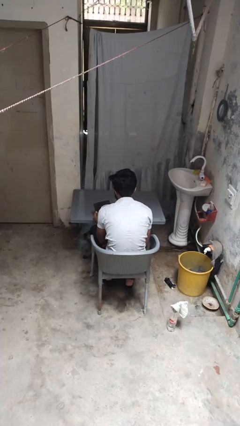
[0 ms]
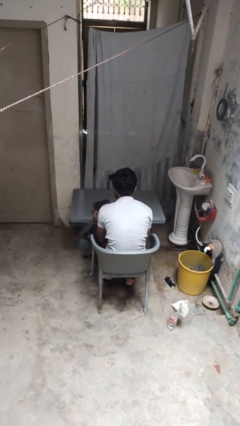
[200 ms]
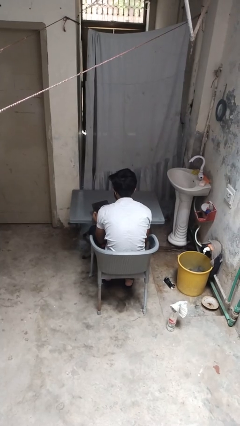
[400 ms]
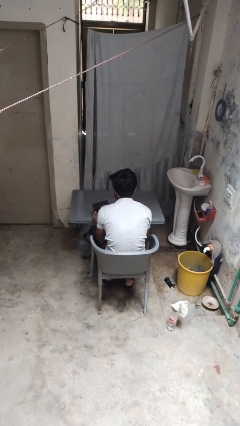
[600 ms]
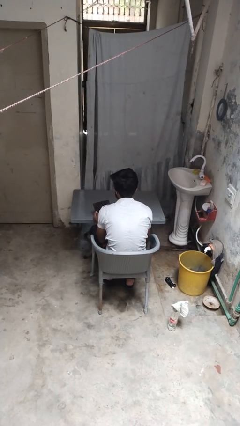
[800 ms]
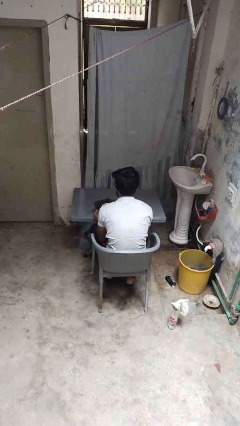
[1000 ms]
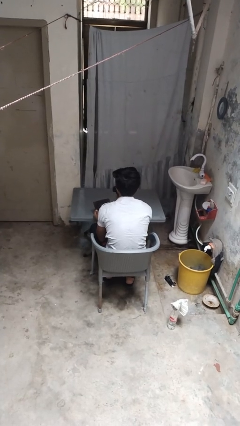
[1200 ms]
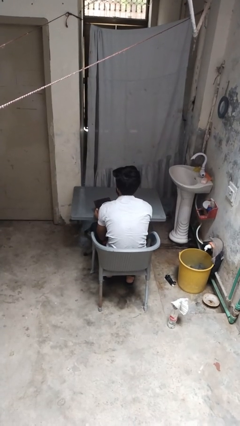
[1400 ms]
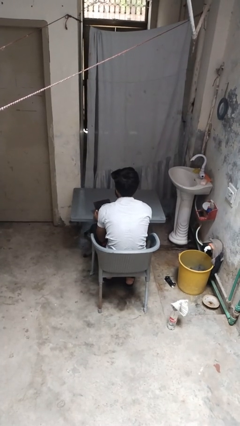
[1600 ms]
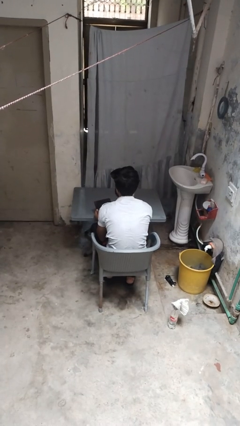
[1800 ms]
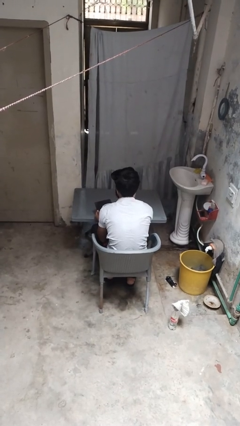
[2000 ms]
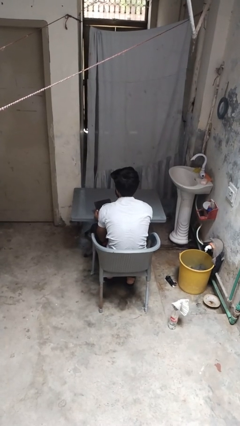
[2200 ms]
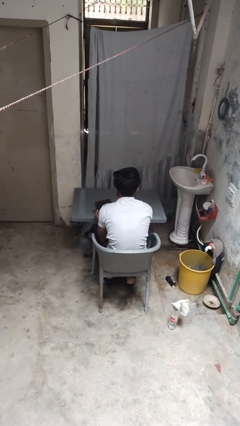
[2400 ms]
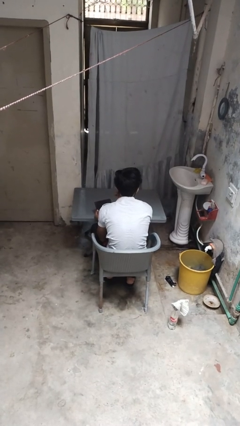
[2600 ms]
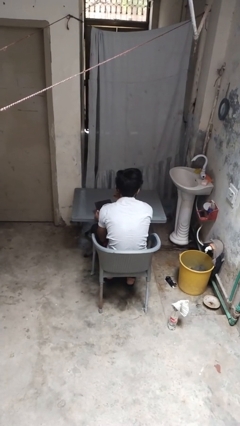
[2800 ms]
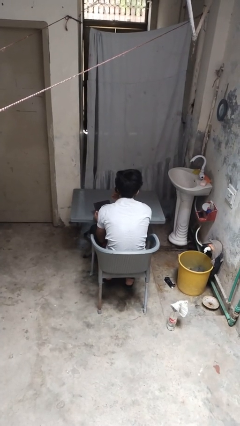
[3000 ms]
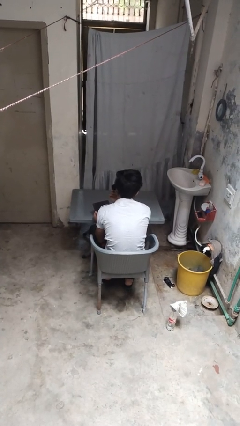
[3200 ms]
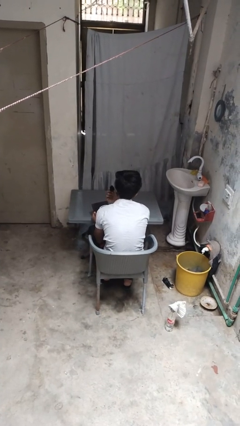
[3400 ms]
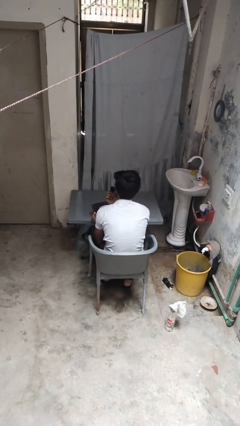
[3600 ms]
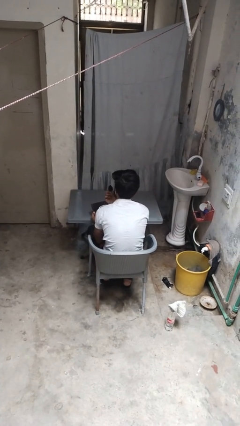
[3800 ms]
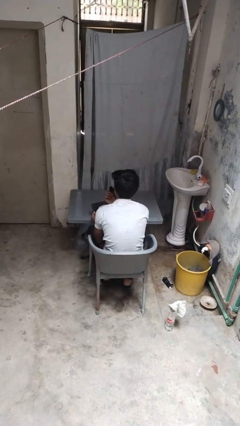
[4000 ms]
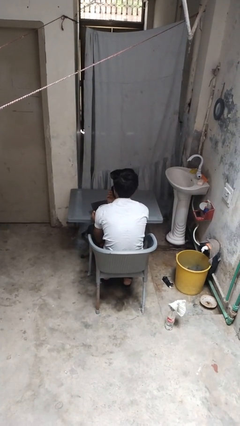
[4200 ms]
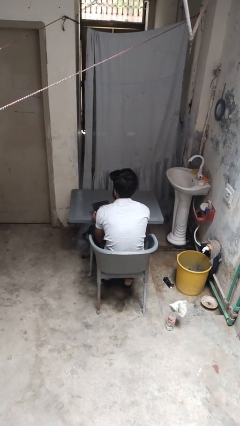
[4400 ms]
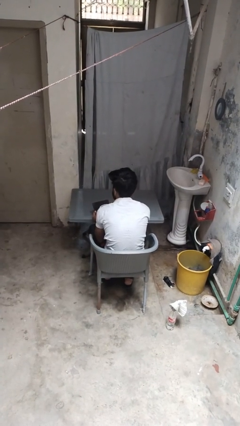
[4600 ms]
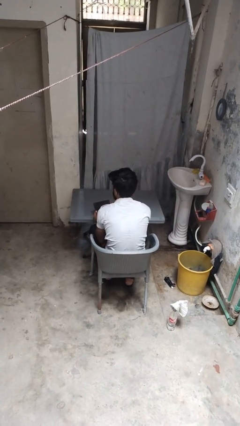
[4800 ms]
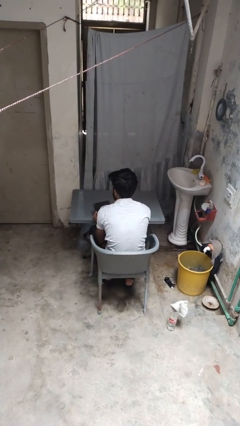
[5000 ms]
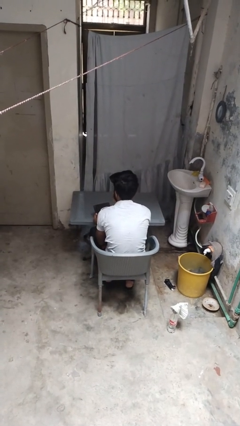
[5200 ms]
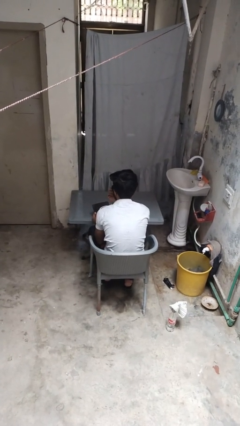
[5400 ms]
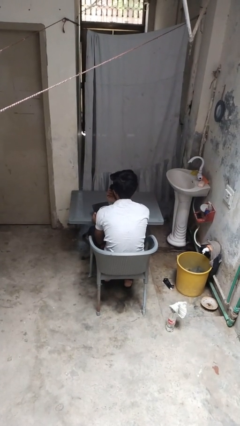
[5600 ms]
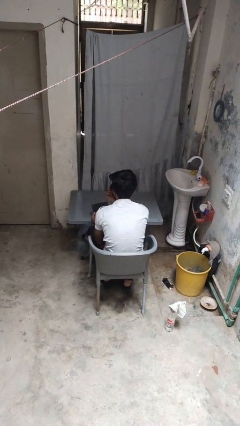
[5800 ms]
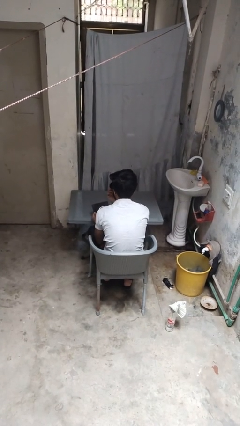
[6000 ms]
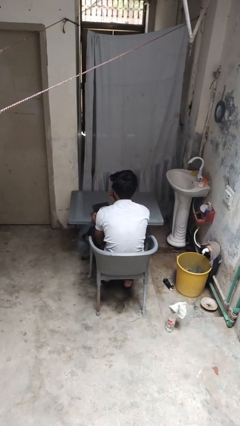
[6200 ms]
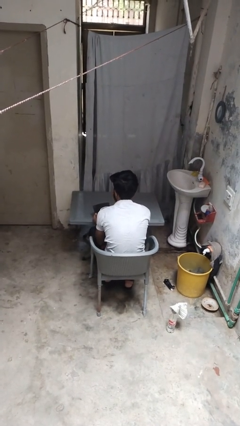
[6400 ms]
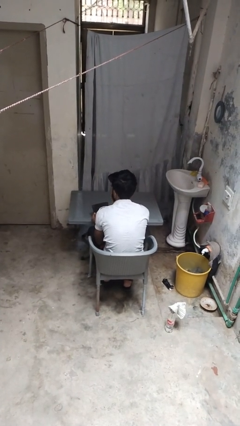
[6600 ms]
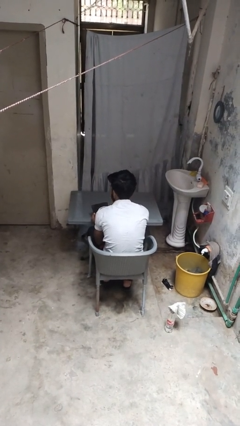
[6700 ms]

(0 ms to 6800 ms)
person applies eye makeup

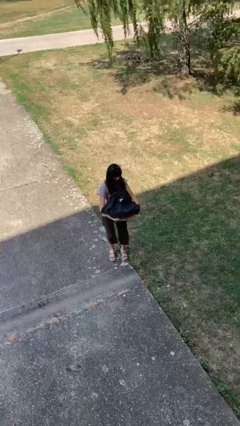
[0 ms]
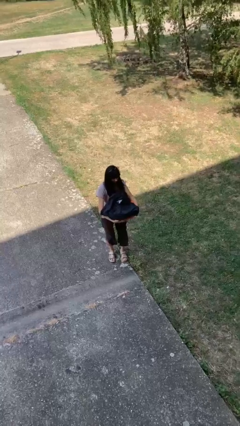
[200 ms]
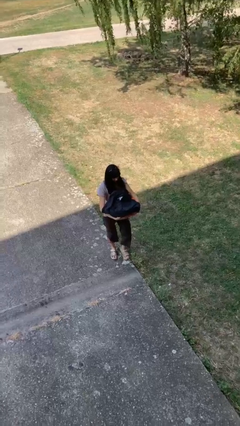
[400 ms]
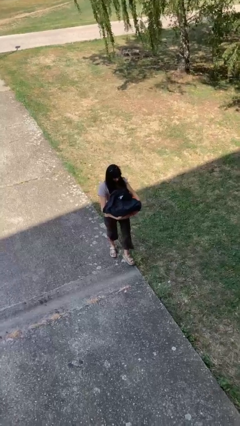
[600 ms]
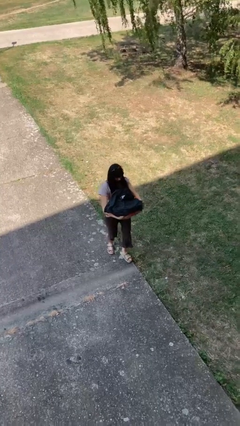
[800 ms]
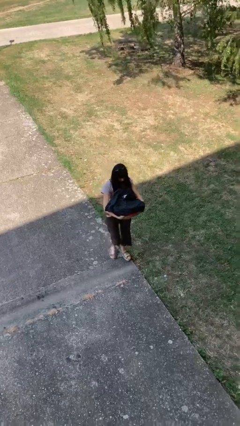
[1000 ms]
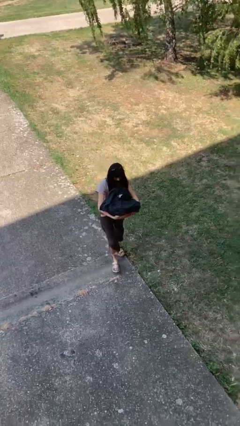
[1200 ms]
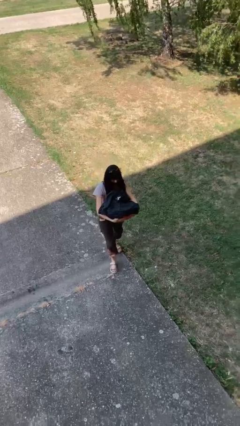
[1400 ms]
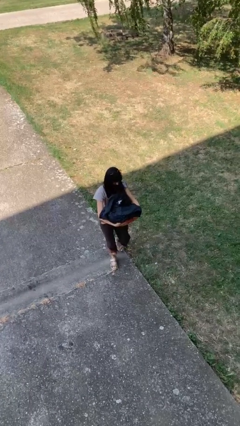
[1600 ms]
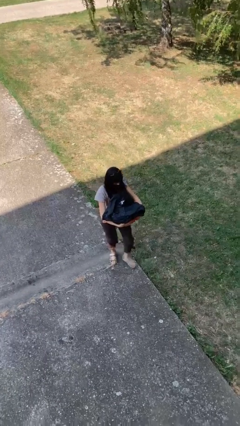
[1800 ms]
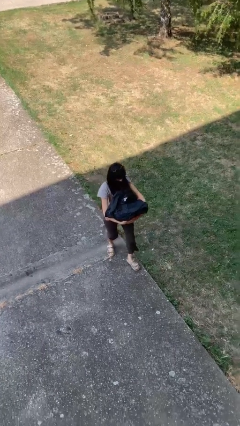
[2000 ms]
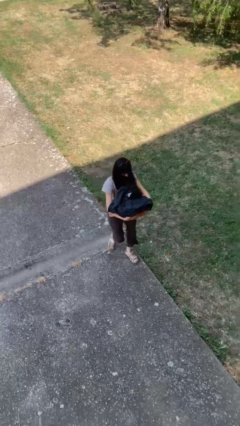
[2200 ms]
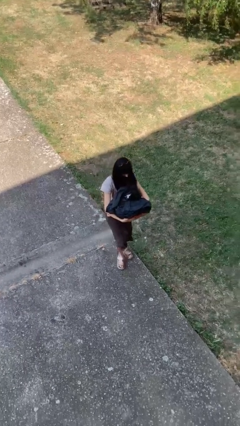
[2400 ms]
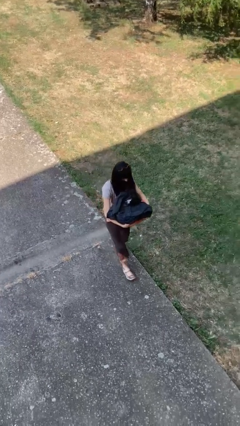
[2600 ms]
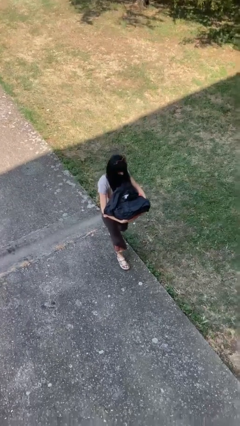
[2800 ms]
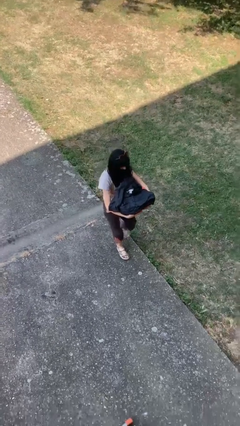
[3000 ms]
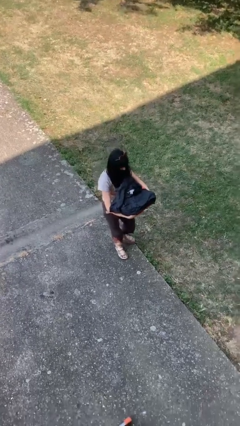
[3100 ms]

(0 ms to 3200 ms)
person carries laundry basket

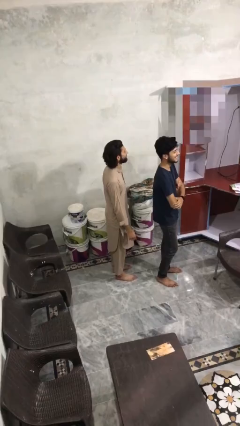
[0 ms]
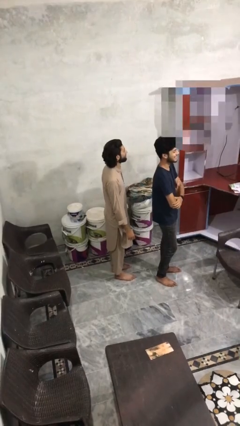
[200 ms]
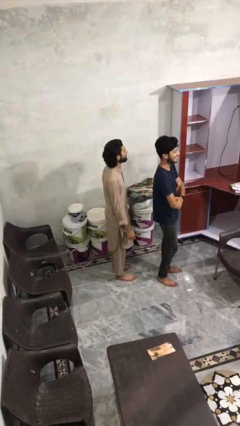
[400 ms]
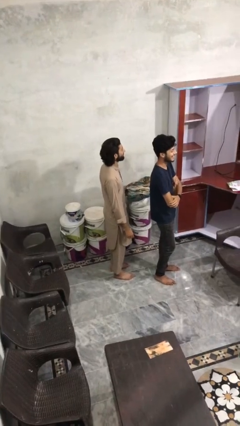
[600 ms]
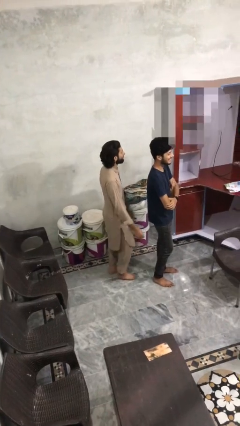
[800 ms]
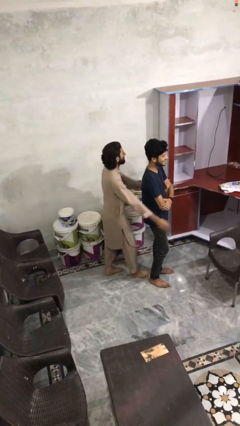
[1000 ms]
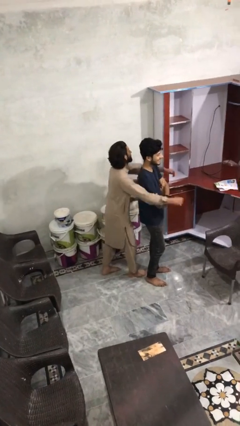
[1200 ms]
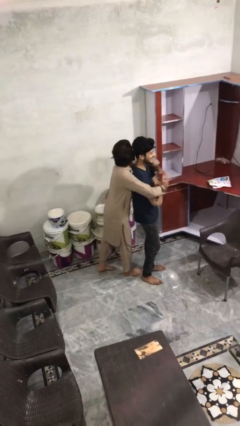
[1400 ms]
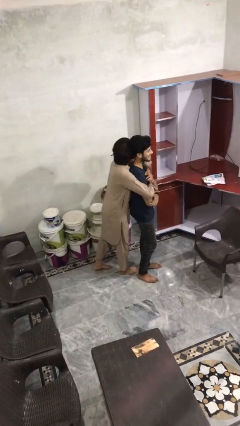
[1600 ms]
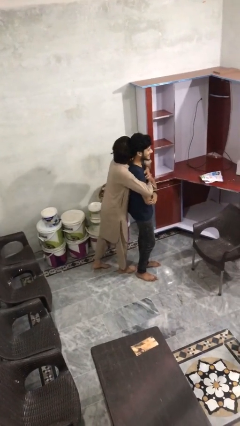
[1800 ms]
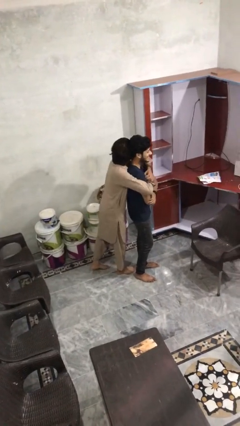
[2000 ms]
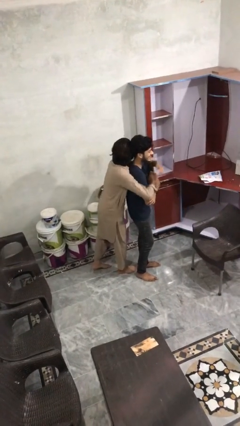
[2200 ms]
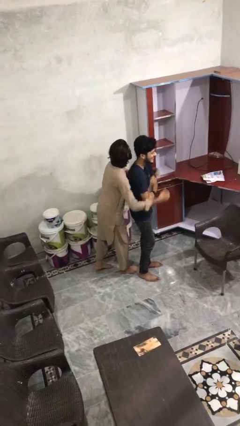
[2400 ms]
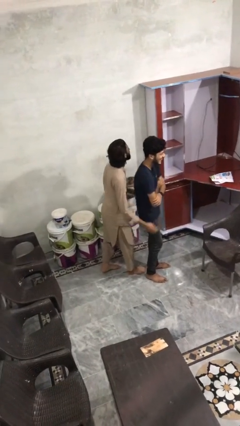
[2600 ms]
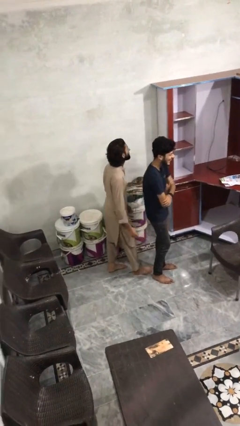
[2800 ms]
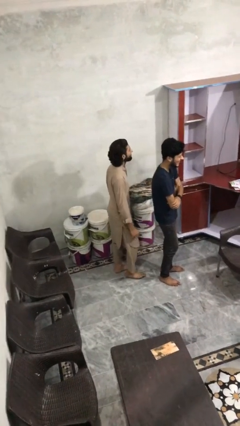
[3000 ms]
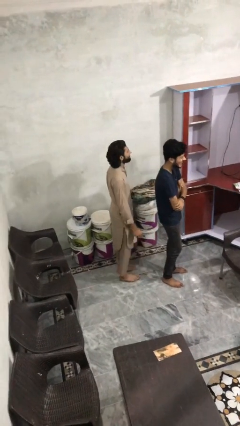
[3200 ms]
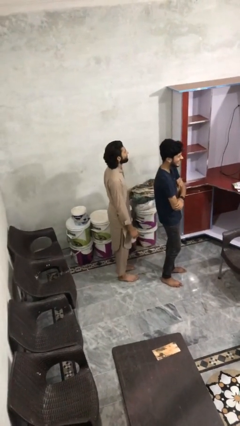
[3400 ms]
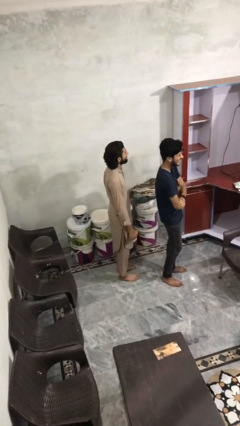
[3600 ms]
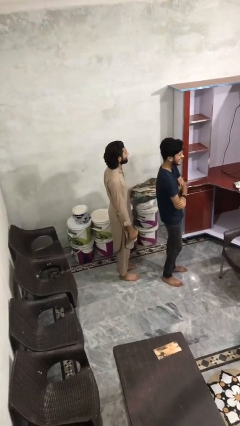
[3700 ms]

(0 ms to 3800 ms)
person hugs person from behind

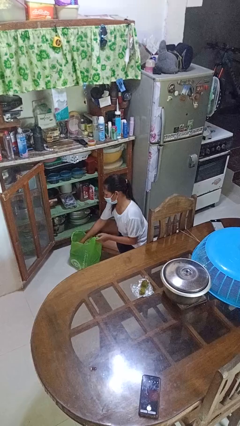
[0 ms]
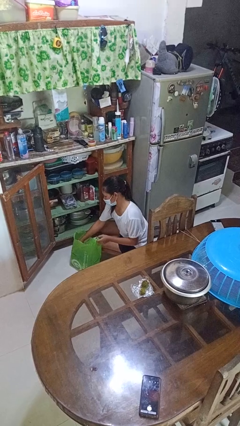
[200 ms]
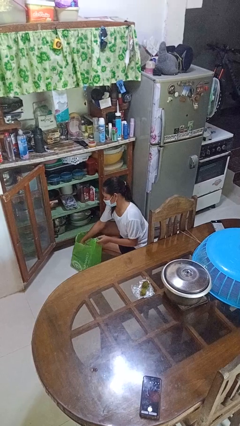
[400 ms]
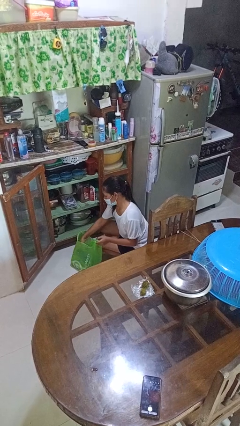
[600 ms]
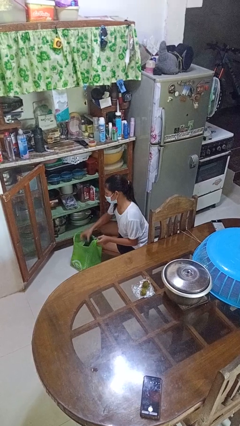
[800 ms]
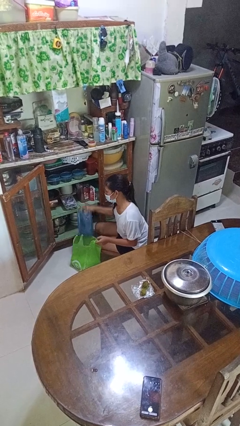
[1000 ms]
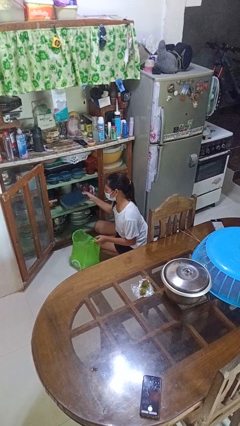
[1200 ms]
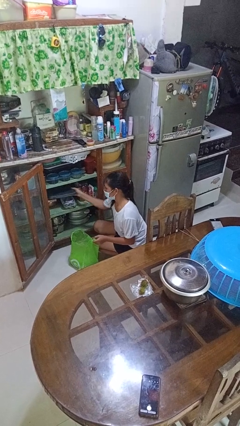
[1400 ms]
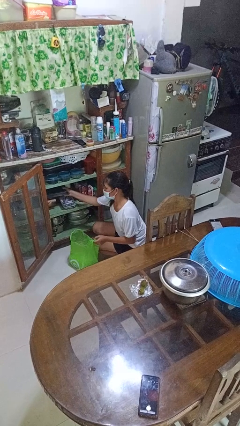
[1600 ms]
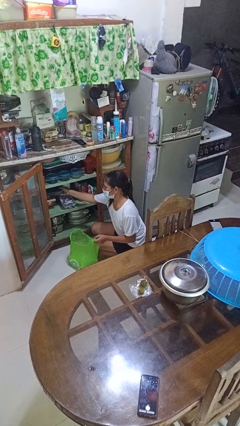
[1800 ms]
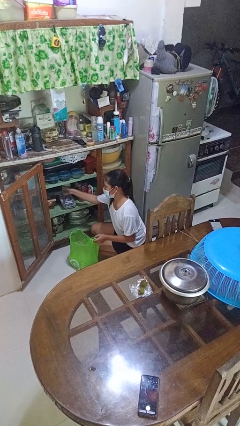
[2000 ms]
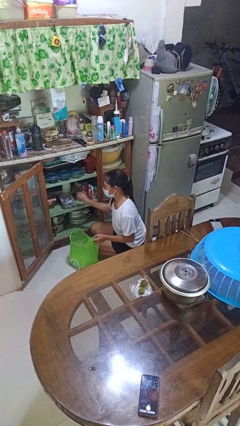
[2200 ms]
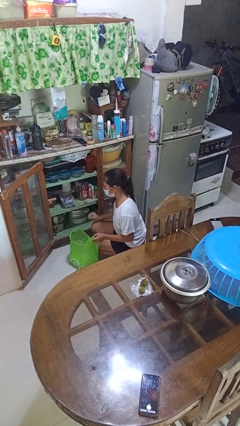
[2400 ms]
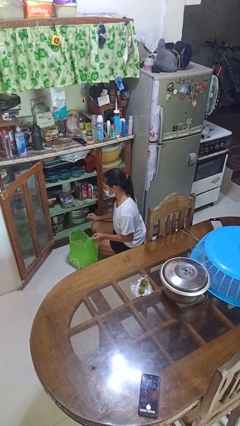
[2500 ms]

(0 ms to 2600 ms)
person loads groceries into cabinet

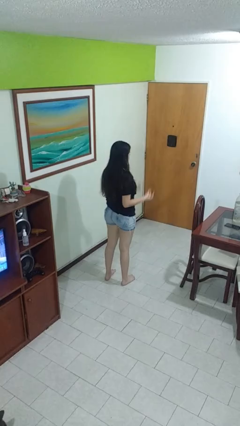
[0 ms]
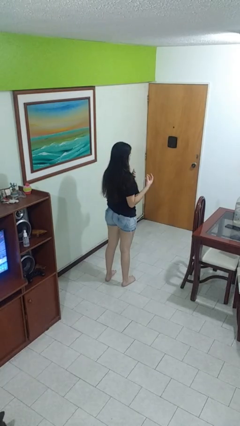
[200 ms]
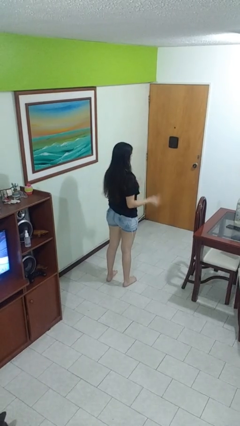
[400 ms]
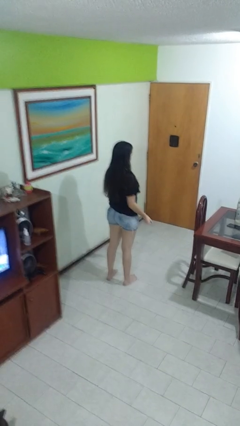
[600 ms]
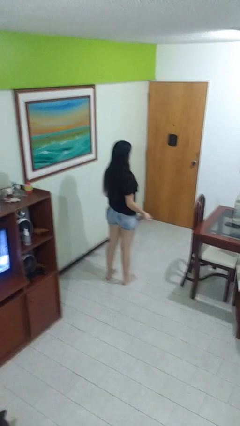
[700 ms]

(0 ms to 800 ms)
person snaps fingers
